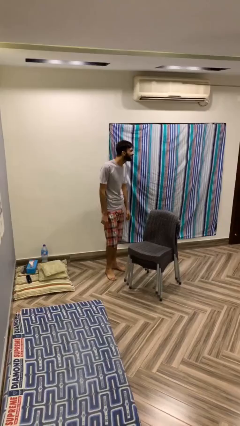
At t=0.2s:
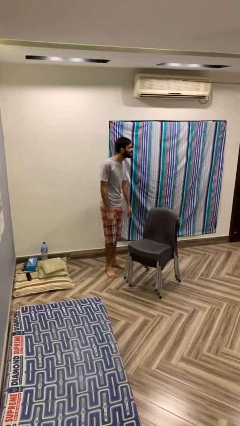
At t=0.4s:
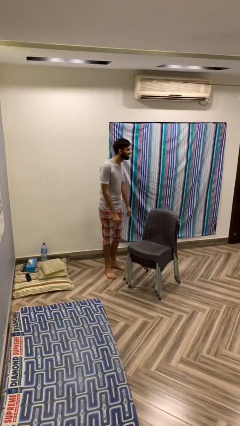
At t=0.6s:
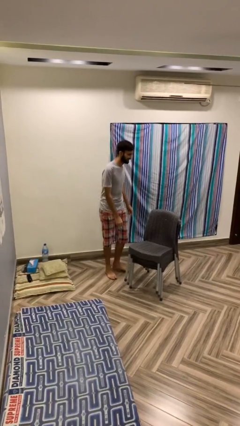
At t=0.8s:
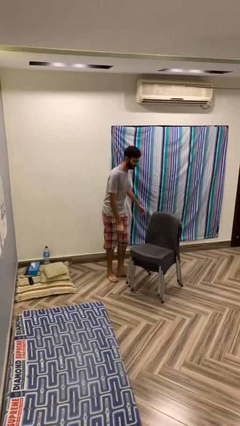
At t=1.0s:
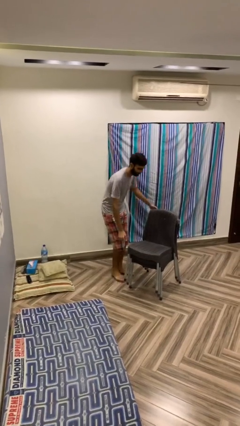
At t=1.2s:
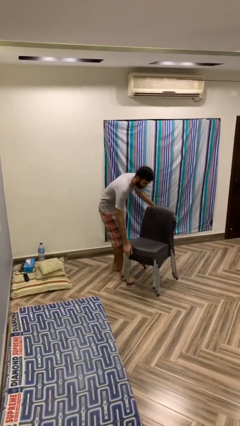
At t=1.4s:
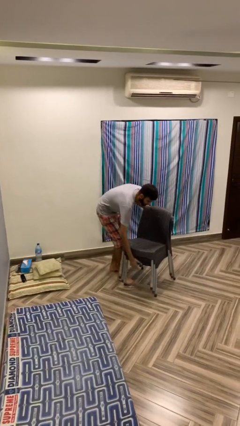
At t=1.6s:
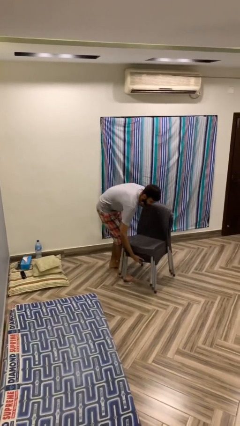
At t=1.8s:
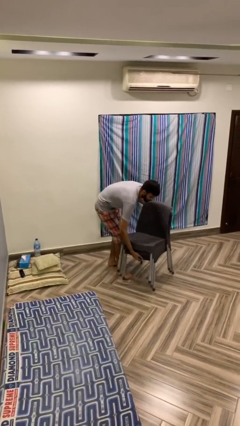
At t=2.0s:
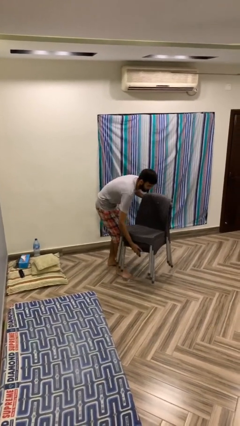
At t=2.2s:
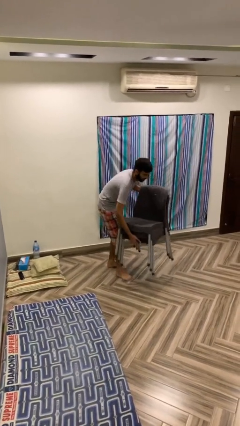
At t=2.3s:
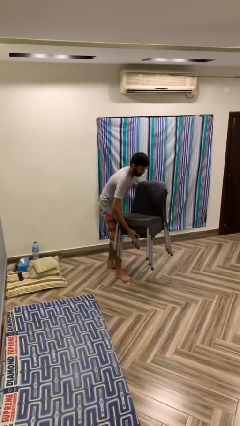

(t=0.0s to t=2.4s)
person picks up object from floor

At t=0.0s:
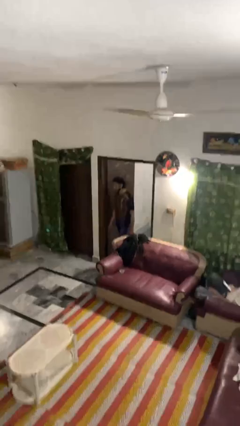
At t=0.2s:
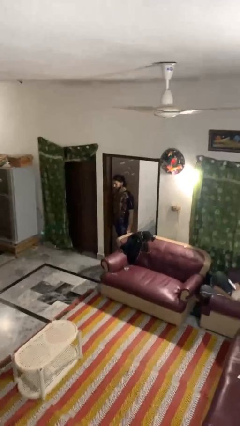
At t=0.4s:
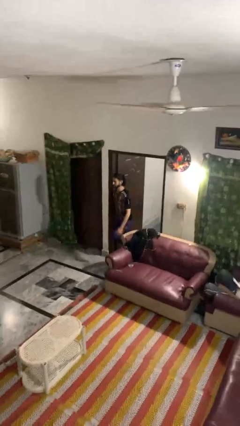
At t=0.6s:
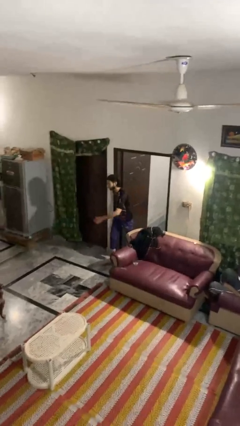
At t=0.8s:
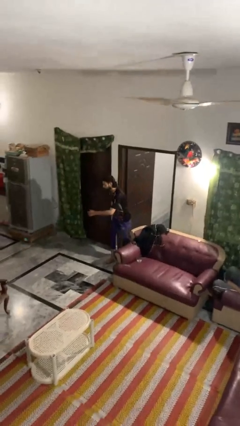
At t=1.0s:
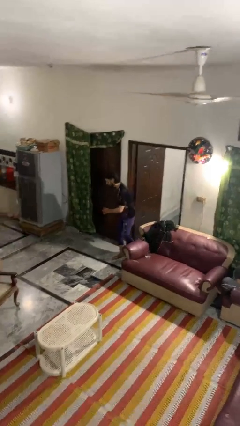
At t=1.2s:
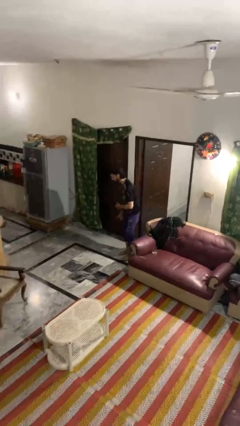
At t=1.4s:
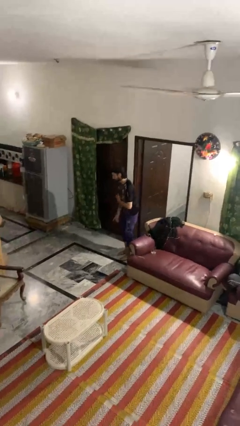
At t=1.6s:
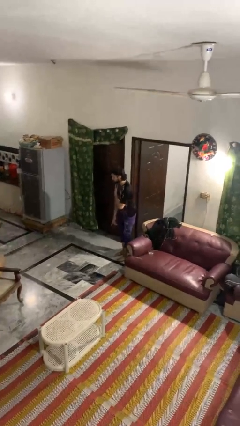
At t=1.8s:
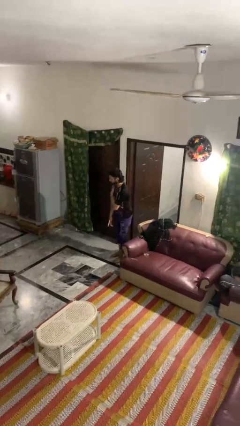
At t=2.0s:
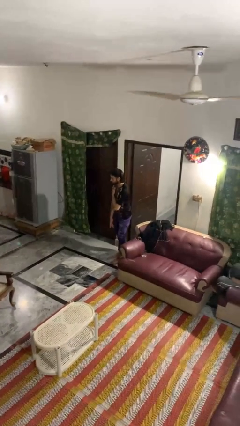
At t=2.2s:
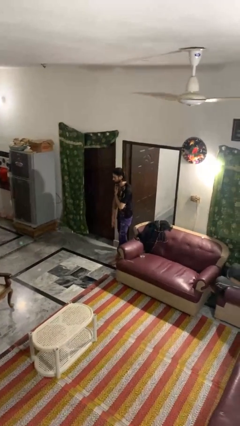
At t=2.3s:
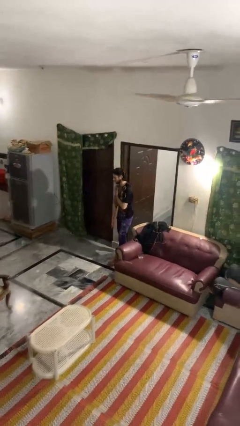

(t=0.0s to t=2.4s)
person bumps into wall

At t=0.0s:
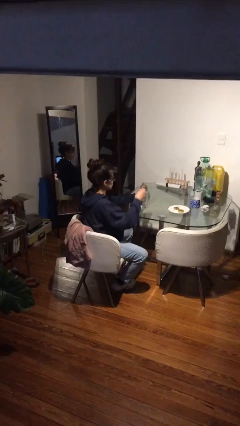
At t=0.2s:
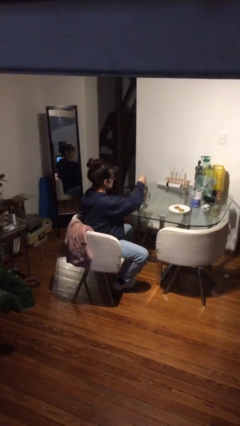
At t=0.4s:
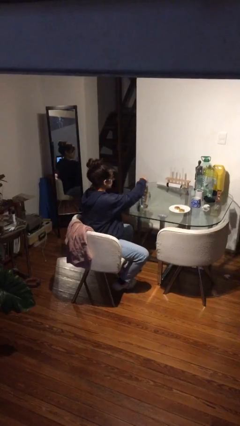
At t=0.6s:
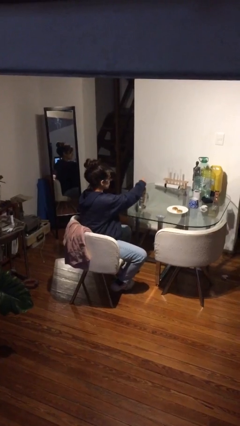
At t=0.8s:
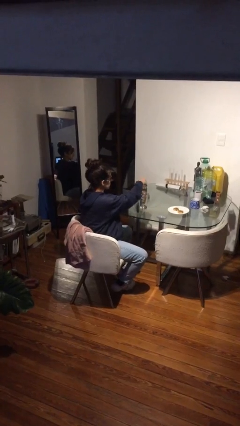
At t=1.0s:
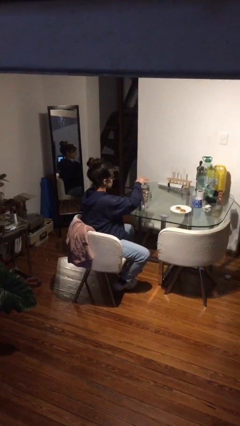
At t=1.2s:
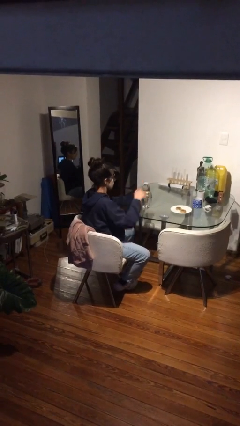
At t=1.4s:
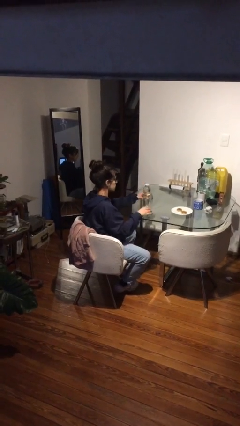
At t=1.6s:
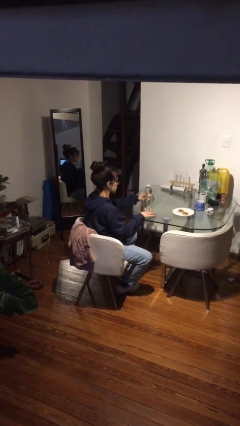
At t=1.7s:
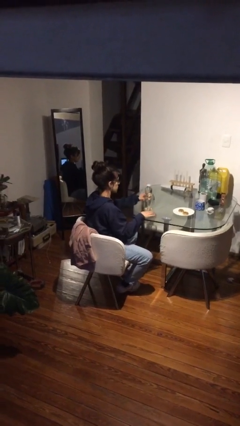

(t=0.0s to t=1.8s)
person screws lid to bottle

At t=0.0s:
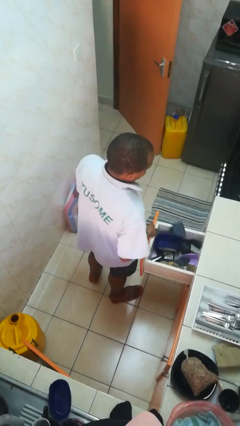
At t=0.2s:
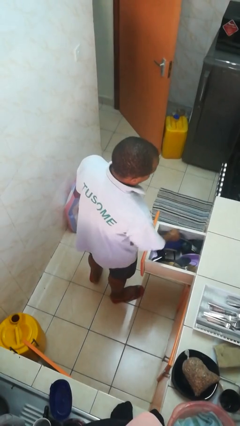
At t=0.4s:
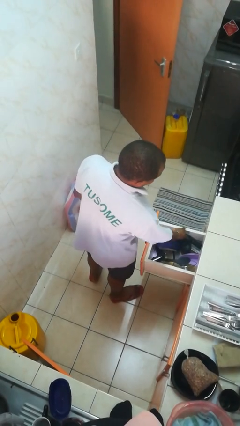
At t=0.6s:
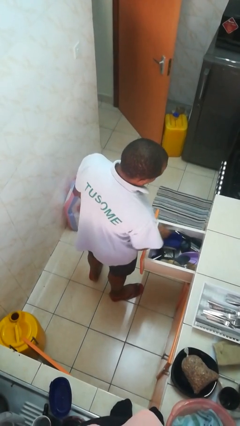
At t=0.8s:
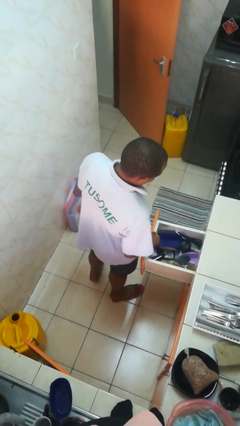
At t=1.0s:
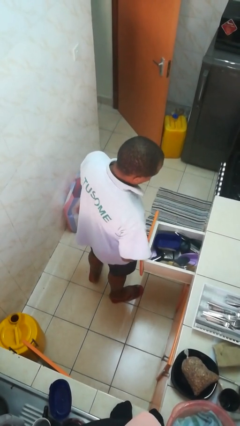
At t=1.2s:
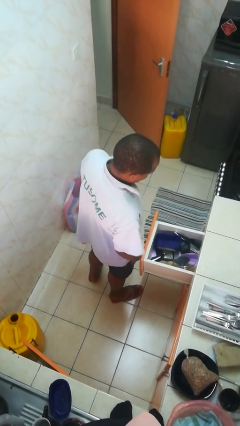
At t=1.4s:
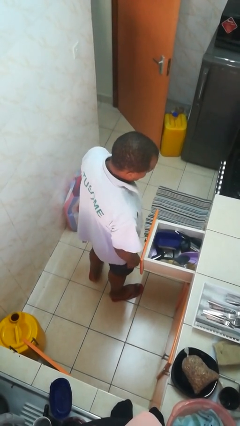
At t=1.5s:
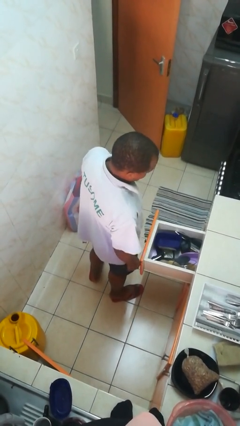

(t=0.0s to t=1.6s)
person puts object into kitchen drawer

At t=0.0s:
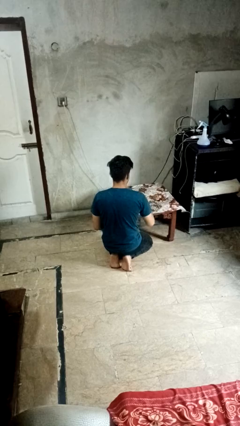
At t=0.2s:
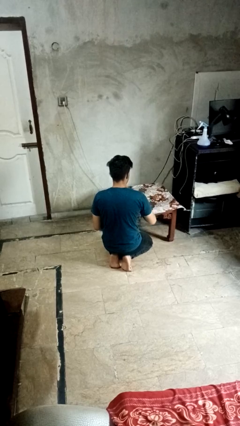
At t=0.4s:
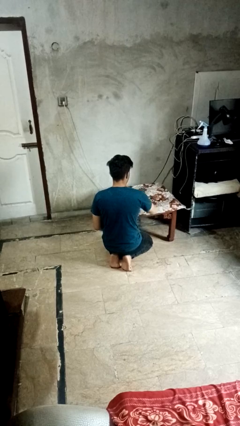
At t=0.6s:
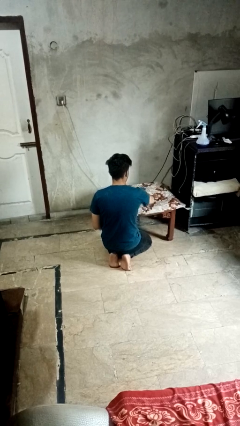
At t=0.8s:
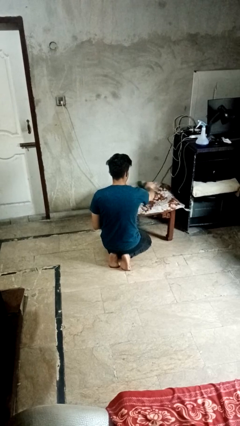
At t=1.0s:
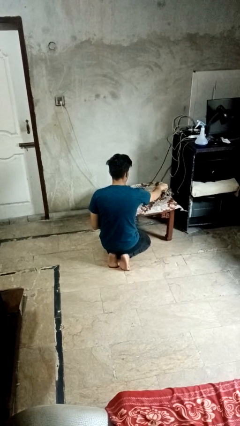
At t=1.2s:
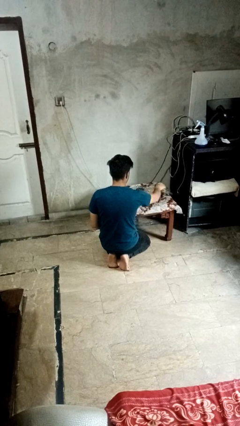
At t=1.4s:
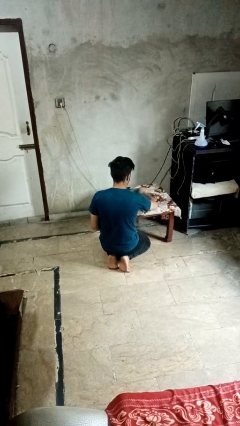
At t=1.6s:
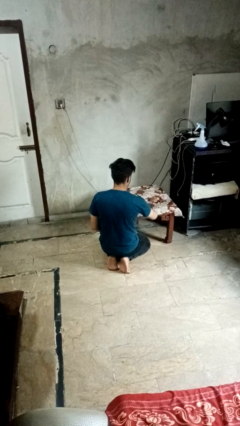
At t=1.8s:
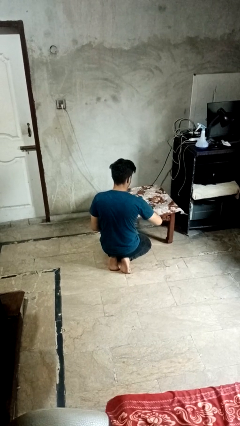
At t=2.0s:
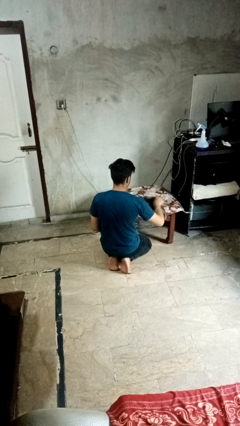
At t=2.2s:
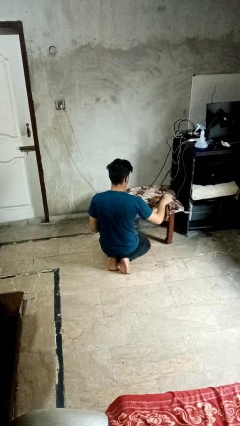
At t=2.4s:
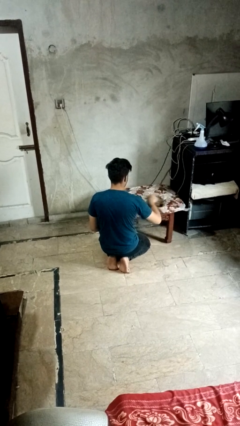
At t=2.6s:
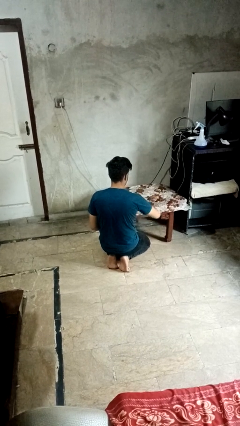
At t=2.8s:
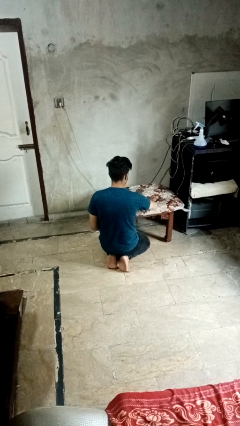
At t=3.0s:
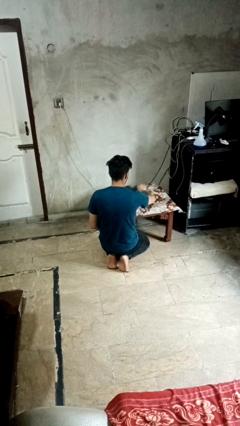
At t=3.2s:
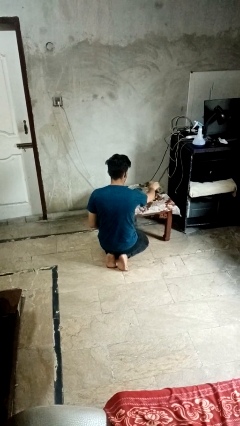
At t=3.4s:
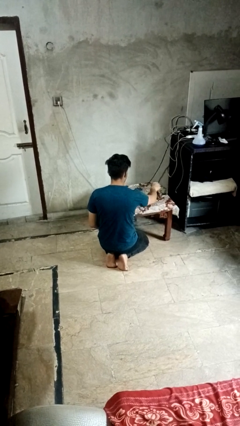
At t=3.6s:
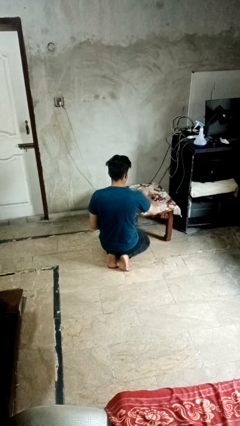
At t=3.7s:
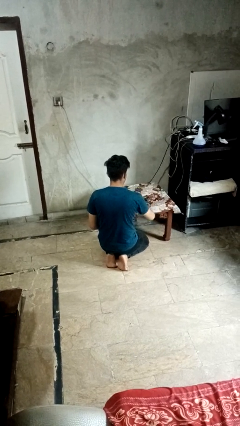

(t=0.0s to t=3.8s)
person cleans table with rag

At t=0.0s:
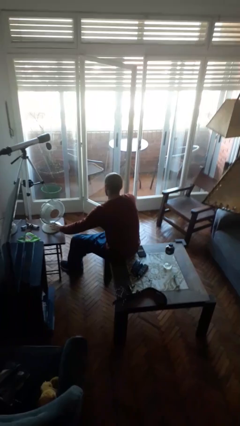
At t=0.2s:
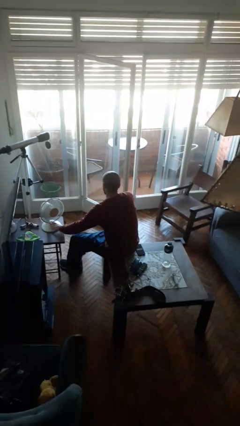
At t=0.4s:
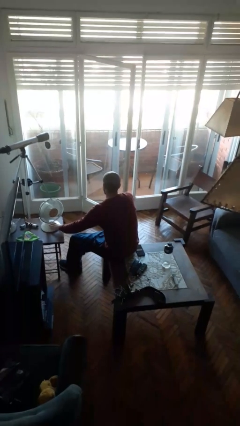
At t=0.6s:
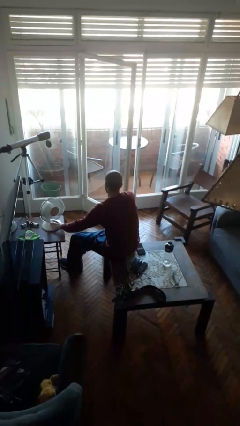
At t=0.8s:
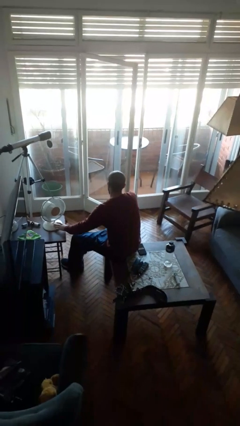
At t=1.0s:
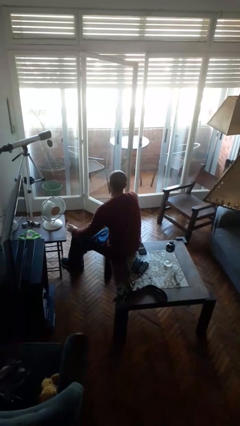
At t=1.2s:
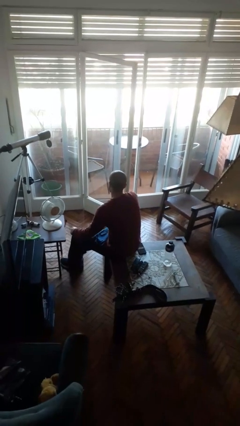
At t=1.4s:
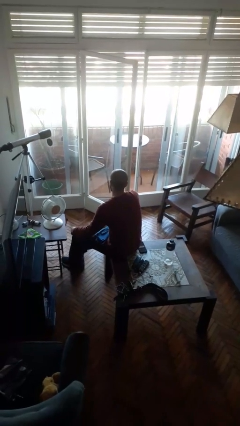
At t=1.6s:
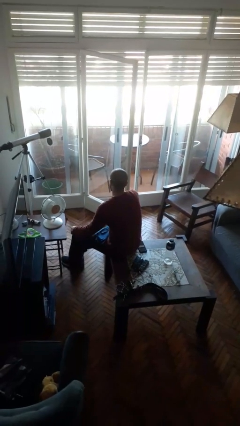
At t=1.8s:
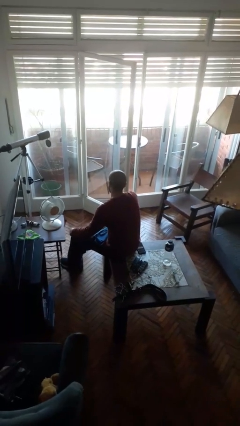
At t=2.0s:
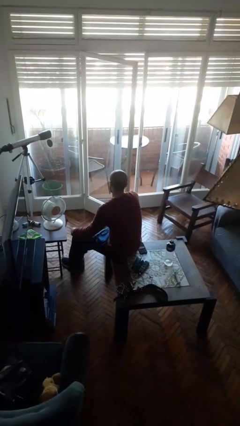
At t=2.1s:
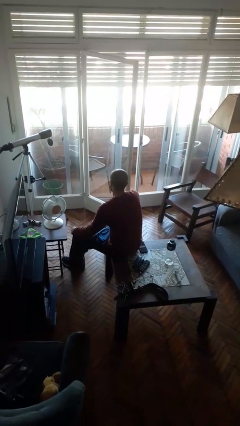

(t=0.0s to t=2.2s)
person turns off fan

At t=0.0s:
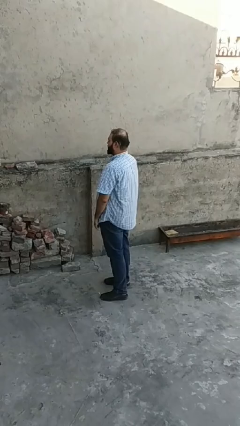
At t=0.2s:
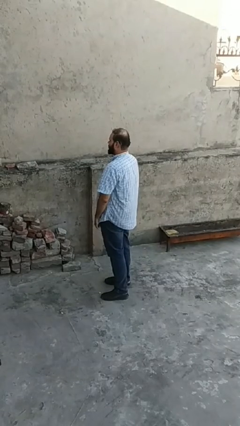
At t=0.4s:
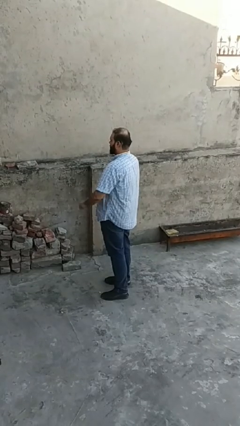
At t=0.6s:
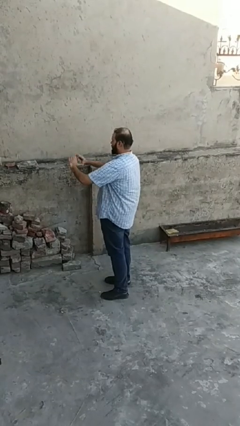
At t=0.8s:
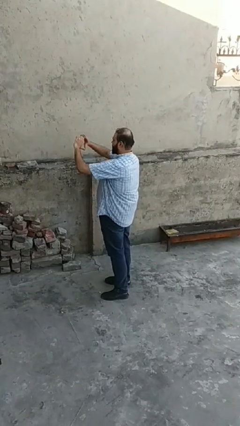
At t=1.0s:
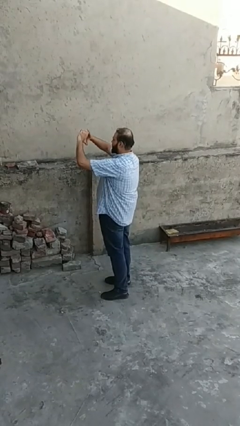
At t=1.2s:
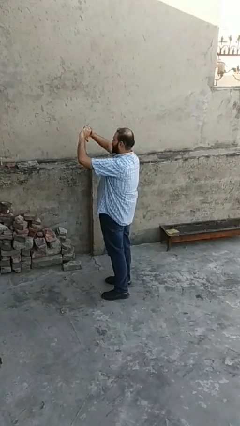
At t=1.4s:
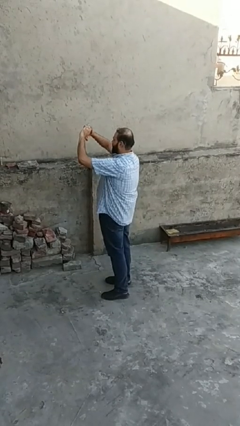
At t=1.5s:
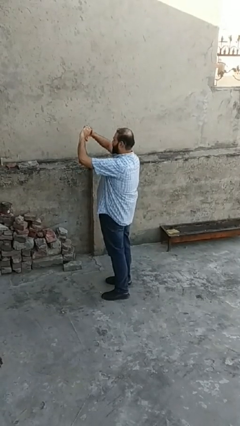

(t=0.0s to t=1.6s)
person gestures heart

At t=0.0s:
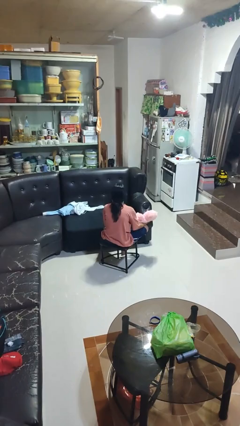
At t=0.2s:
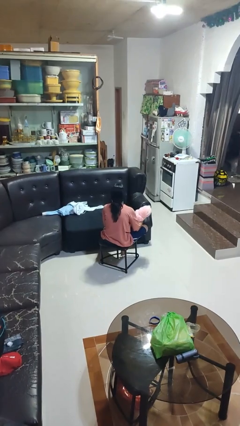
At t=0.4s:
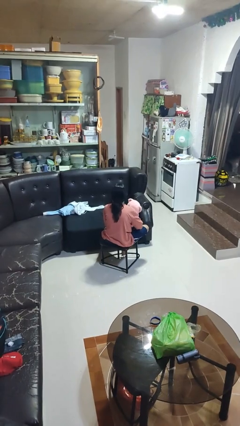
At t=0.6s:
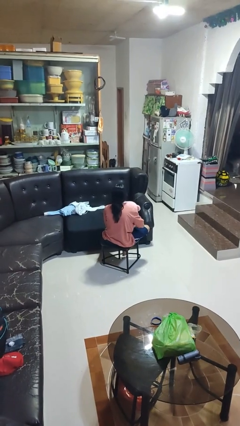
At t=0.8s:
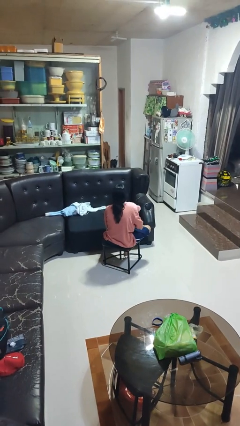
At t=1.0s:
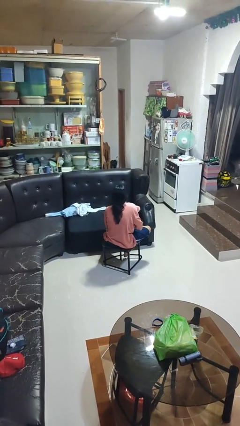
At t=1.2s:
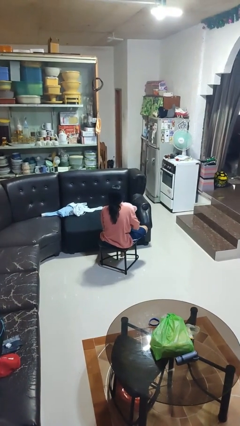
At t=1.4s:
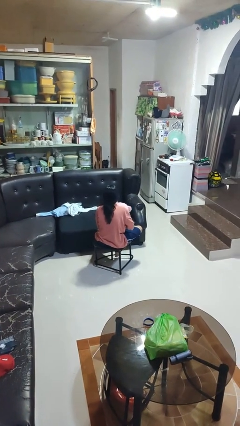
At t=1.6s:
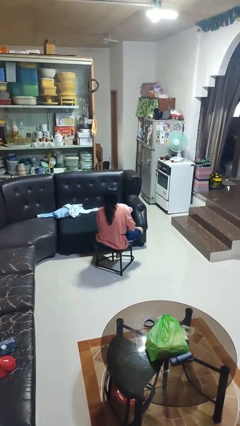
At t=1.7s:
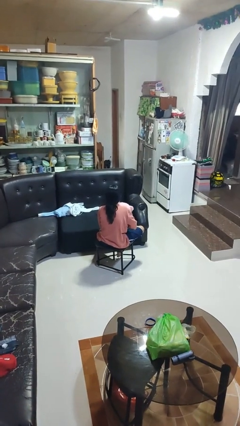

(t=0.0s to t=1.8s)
person hugs stuffed animal
